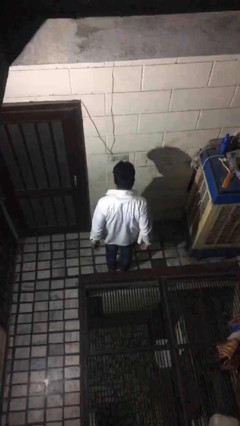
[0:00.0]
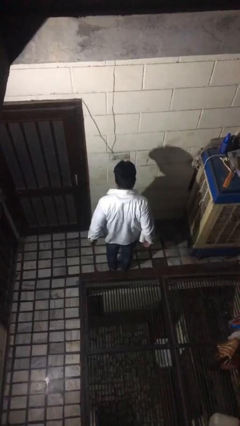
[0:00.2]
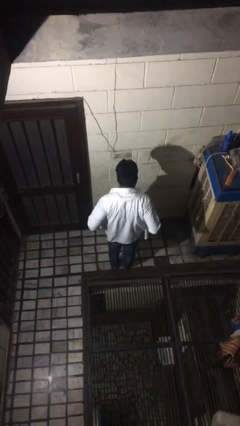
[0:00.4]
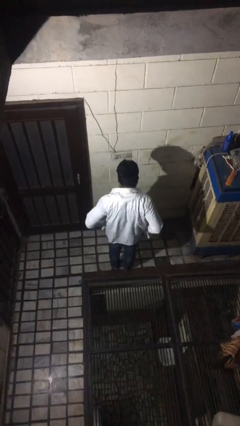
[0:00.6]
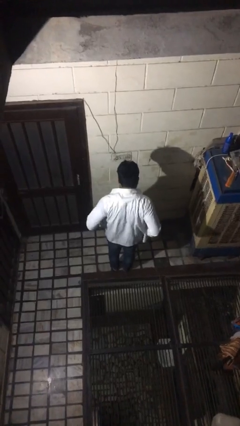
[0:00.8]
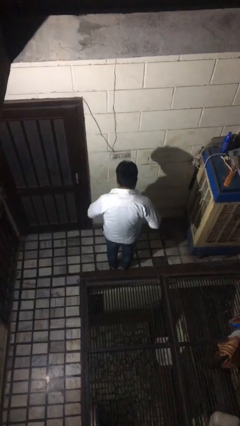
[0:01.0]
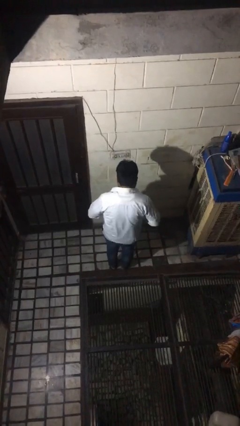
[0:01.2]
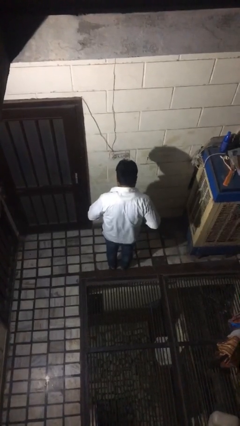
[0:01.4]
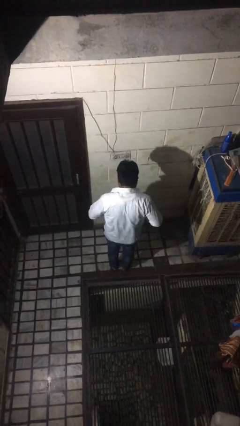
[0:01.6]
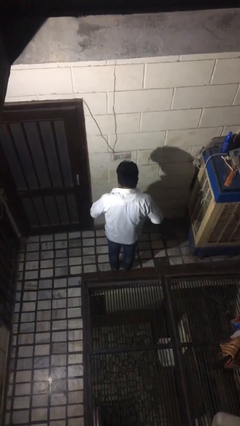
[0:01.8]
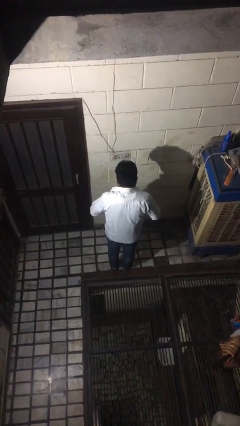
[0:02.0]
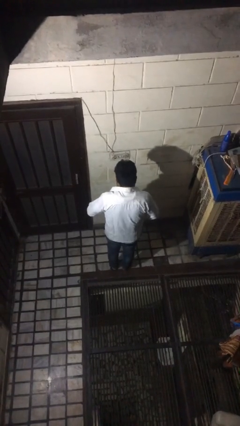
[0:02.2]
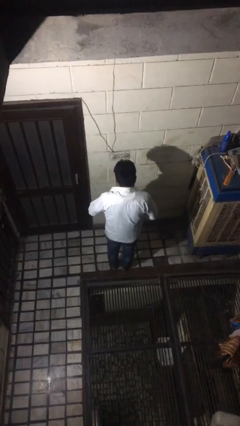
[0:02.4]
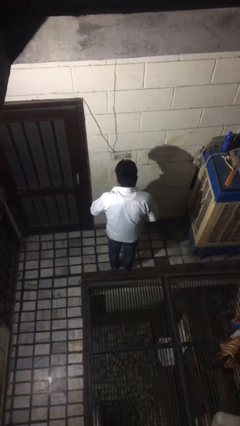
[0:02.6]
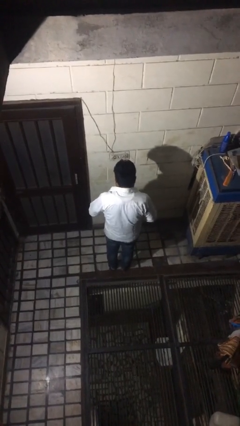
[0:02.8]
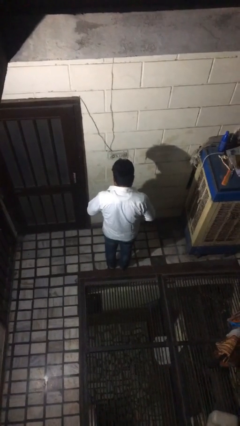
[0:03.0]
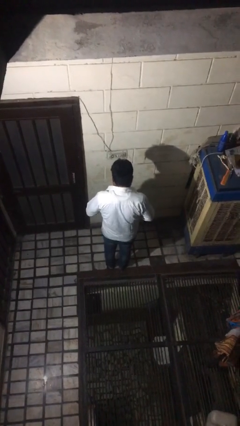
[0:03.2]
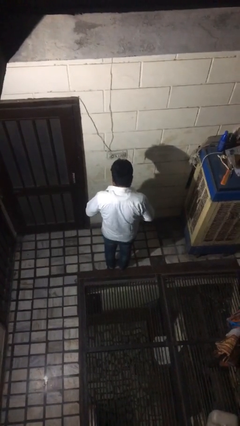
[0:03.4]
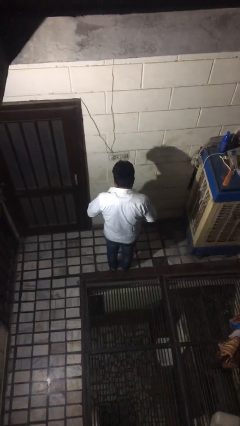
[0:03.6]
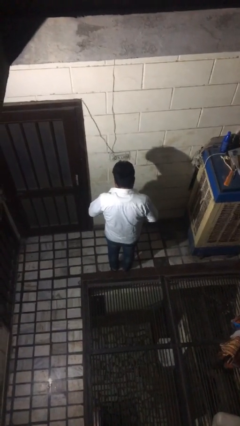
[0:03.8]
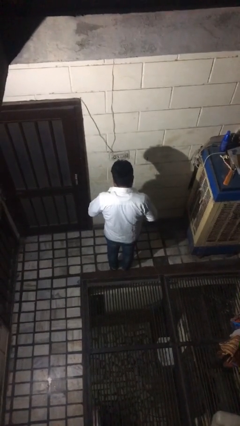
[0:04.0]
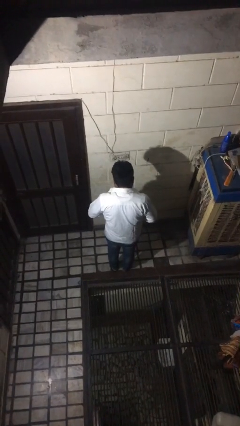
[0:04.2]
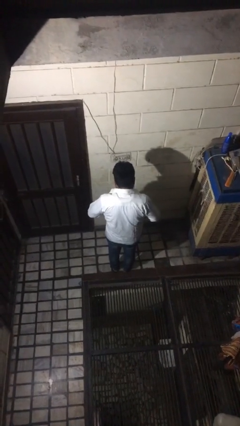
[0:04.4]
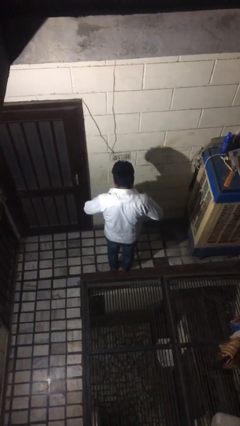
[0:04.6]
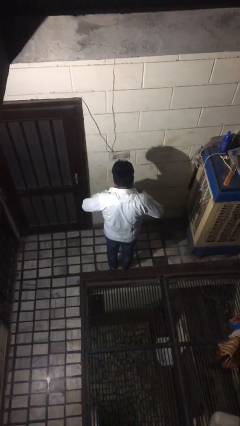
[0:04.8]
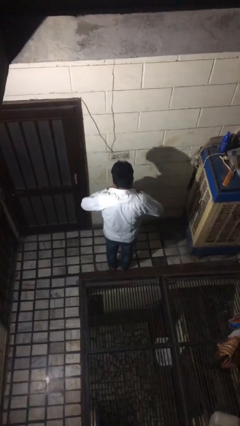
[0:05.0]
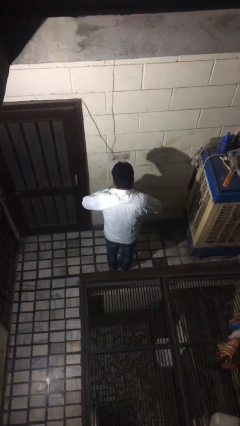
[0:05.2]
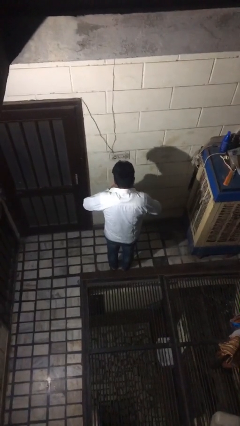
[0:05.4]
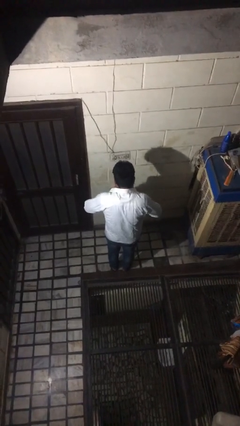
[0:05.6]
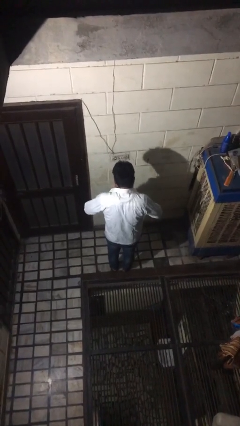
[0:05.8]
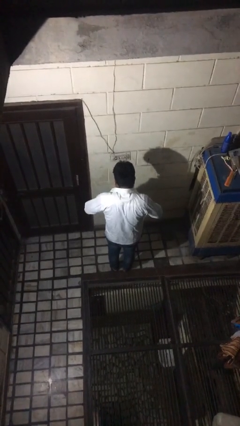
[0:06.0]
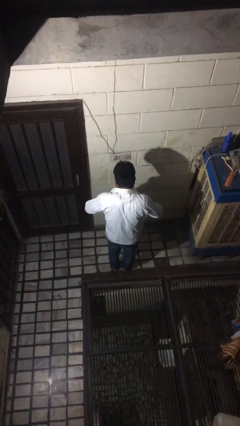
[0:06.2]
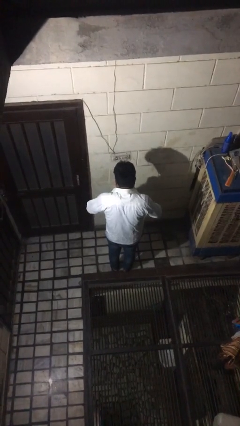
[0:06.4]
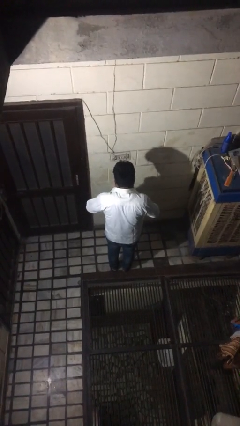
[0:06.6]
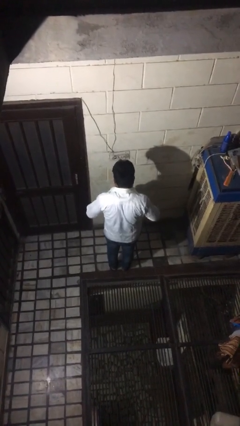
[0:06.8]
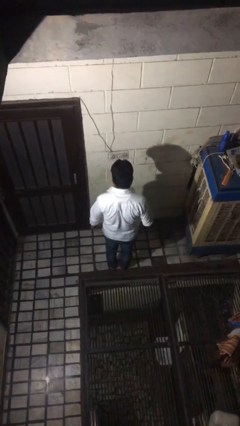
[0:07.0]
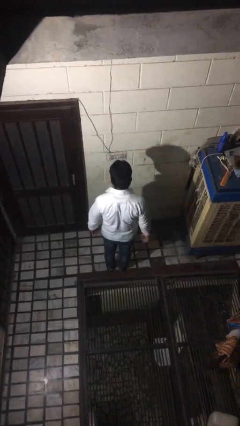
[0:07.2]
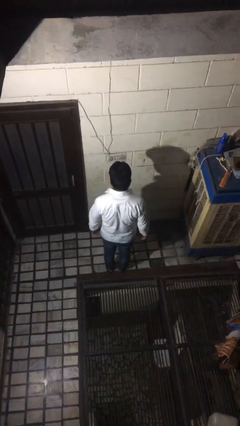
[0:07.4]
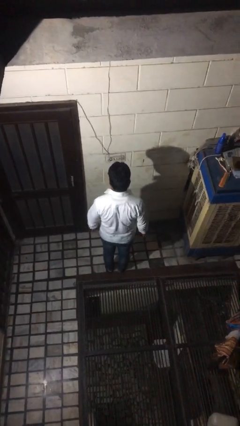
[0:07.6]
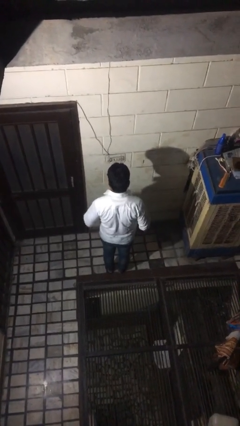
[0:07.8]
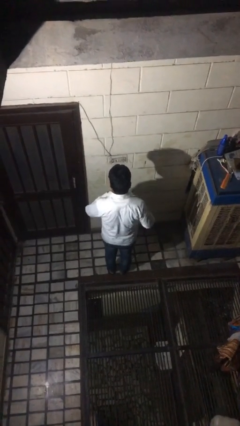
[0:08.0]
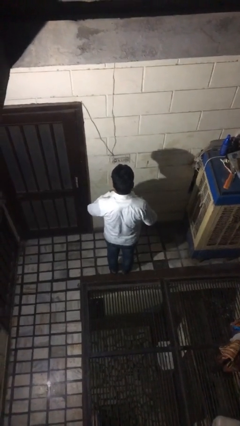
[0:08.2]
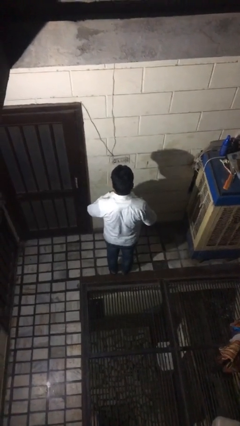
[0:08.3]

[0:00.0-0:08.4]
person buttons shirt

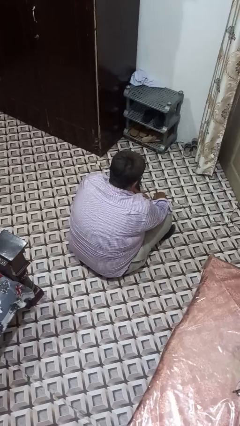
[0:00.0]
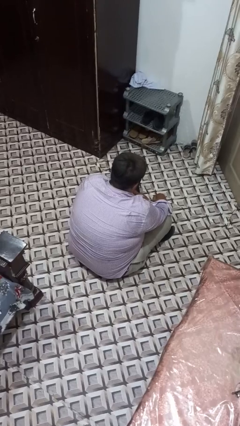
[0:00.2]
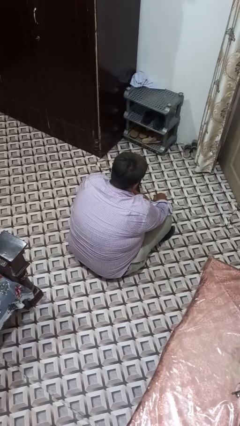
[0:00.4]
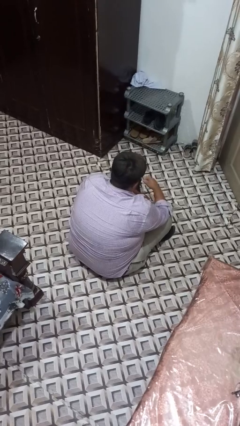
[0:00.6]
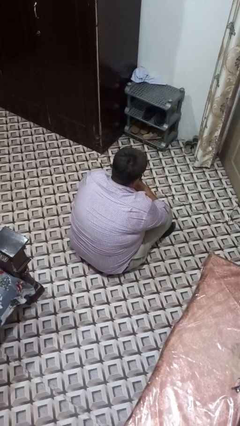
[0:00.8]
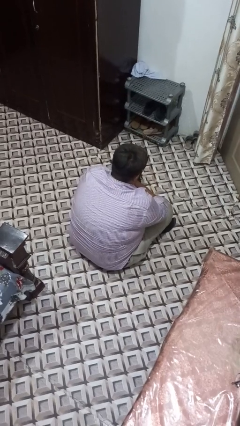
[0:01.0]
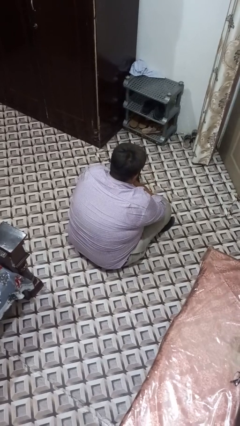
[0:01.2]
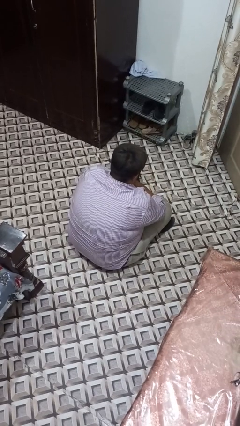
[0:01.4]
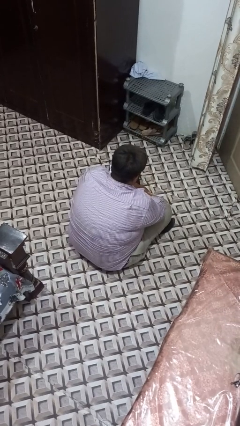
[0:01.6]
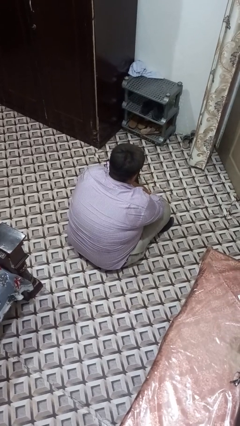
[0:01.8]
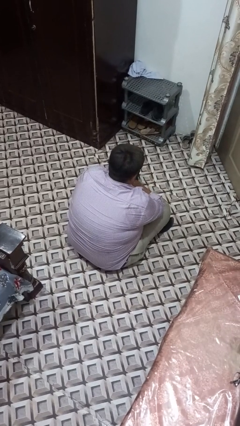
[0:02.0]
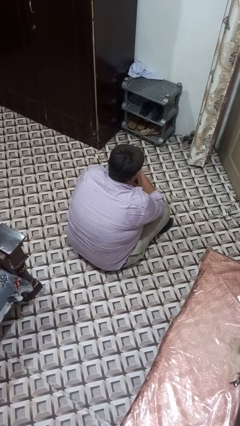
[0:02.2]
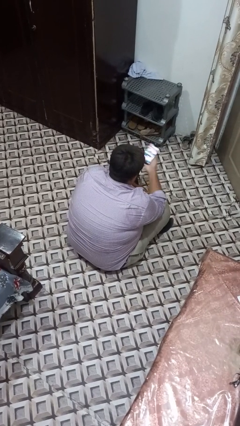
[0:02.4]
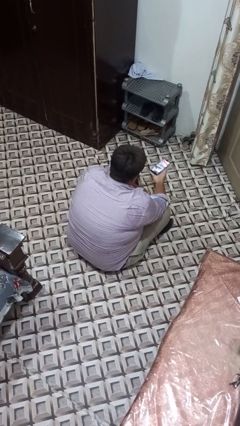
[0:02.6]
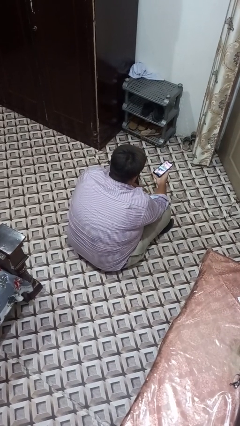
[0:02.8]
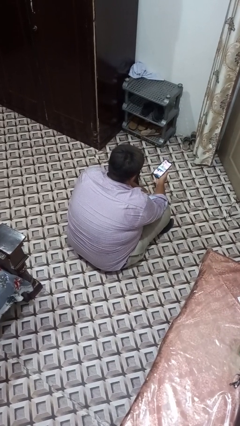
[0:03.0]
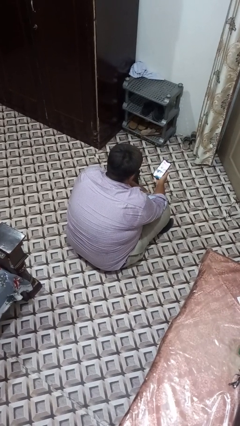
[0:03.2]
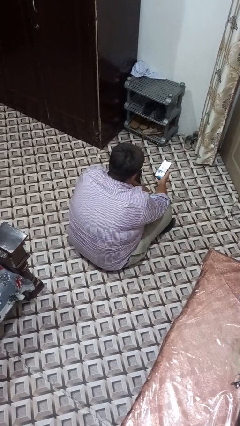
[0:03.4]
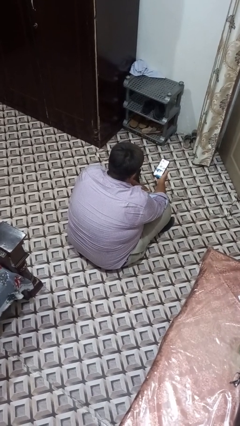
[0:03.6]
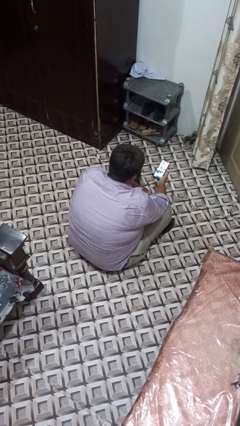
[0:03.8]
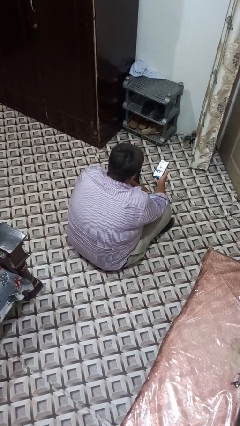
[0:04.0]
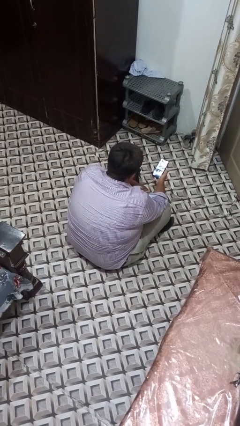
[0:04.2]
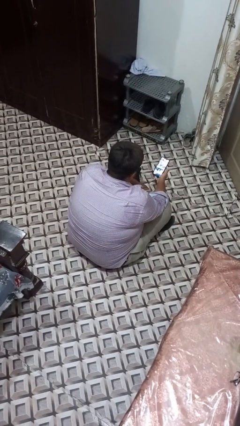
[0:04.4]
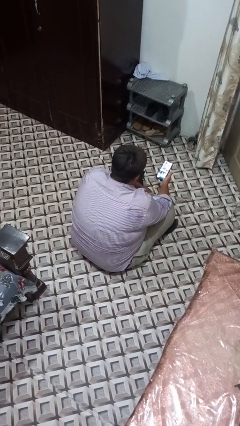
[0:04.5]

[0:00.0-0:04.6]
person takes phone from pocket

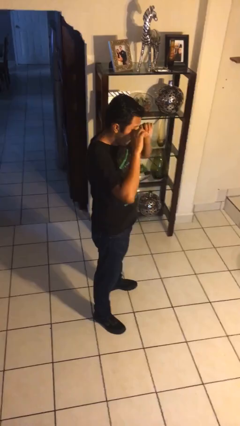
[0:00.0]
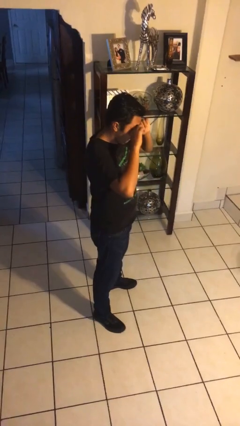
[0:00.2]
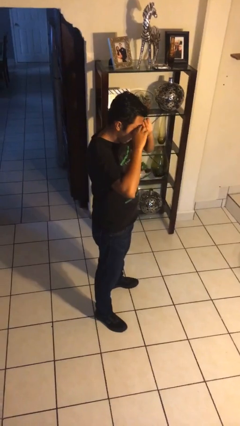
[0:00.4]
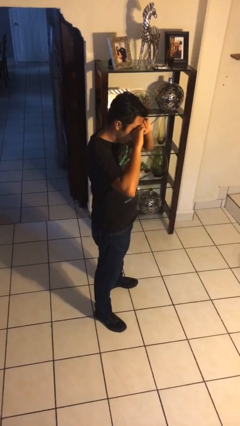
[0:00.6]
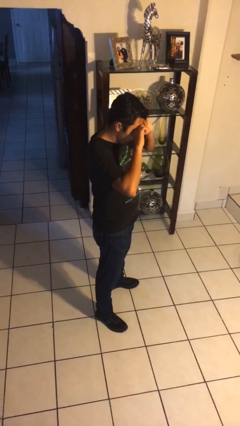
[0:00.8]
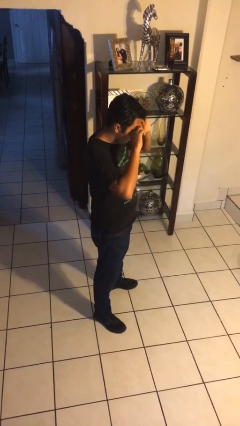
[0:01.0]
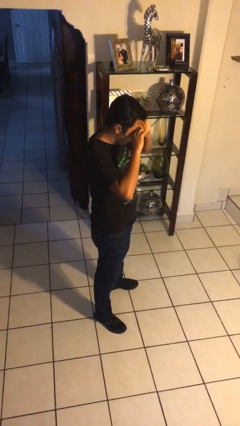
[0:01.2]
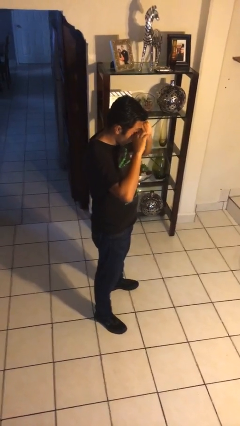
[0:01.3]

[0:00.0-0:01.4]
person rubs eyes

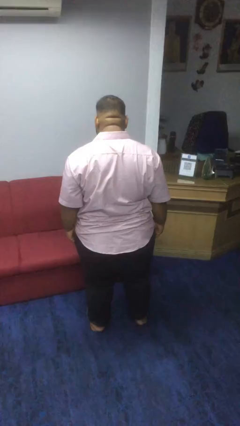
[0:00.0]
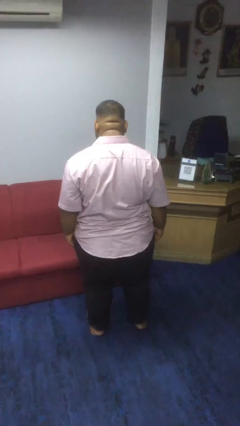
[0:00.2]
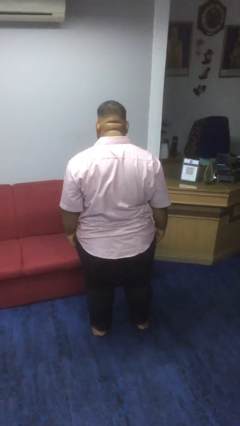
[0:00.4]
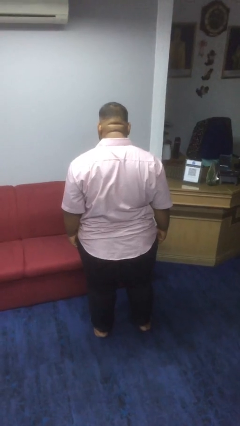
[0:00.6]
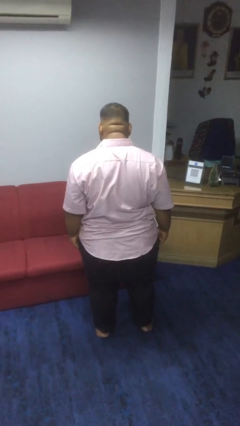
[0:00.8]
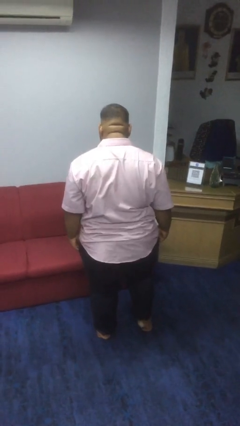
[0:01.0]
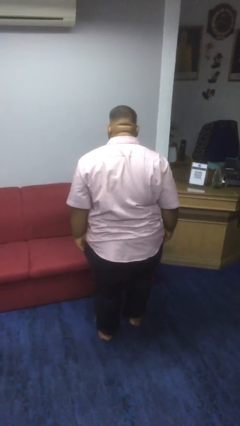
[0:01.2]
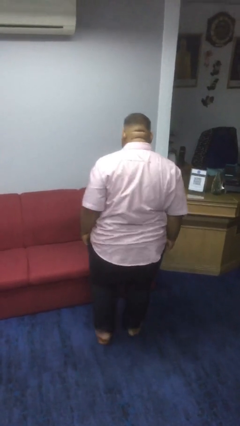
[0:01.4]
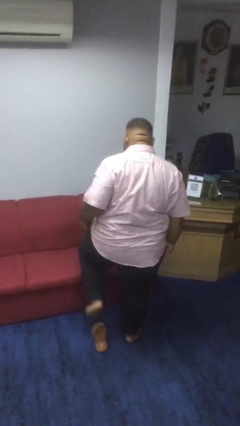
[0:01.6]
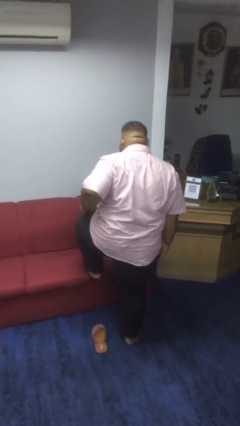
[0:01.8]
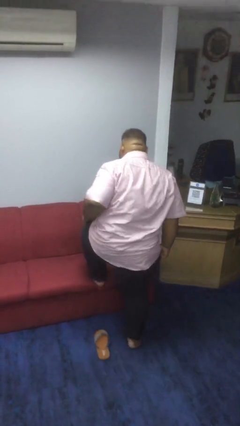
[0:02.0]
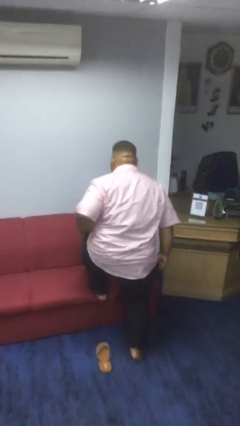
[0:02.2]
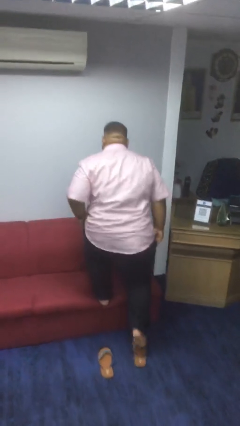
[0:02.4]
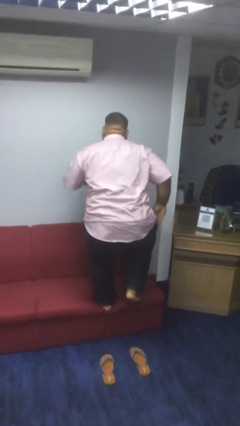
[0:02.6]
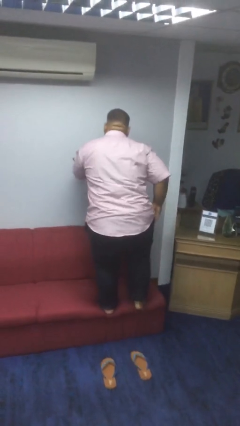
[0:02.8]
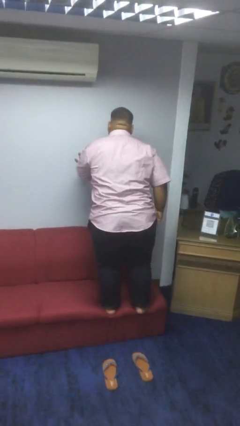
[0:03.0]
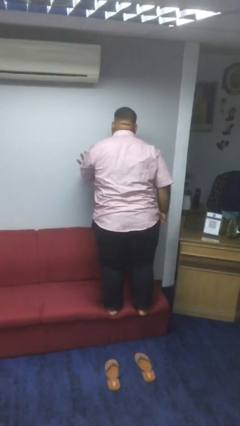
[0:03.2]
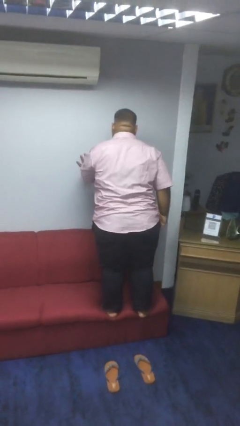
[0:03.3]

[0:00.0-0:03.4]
person climbs on couch
